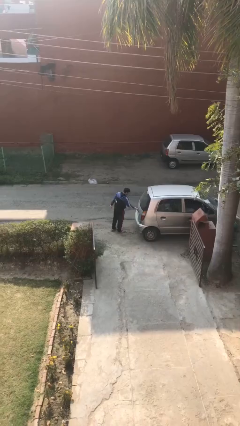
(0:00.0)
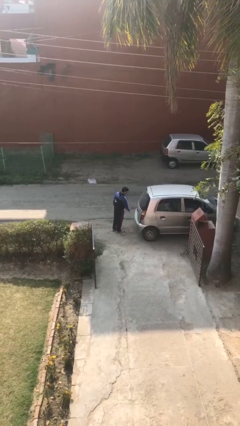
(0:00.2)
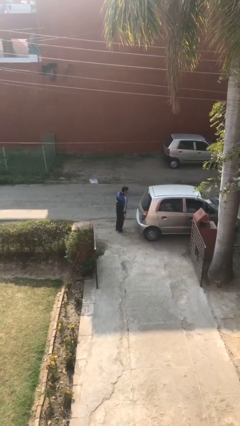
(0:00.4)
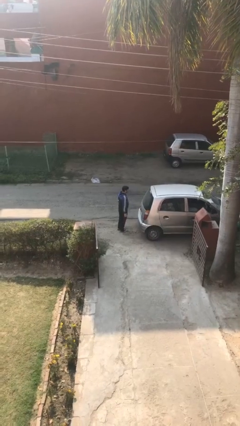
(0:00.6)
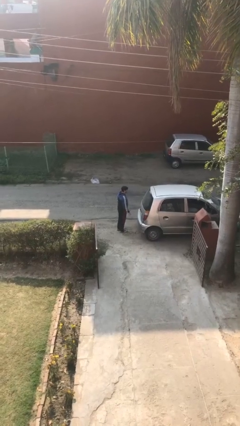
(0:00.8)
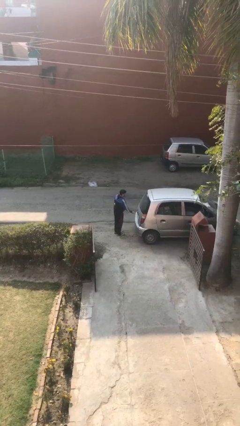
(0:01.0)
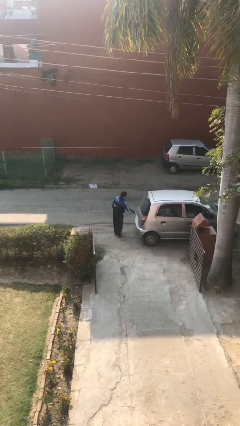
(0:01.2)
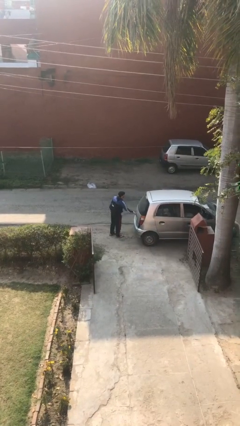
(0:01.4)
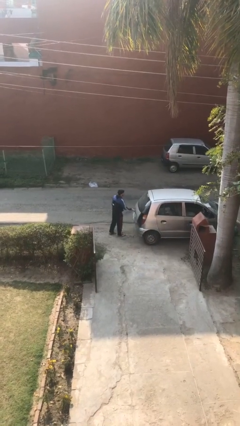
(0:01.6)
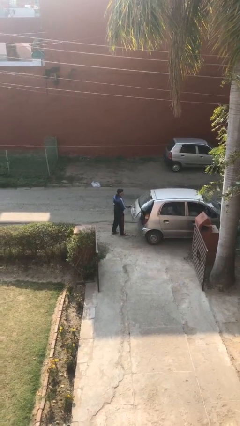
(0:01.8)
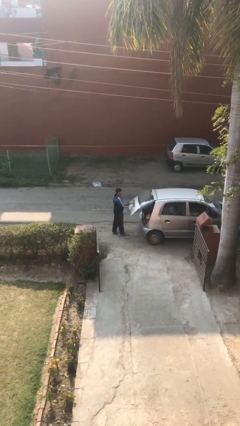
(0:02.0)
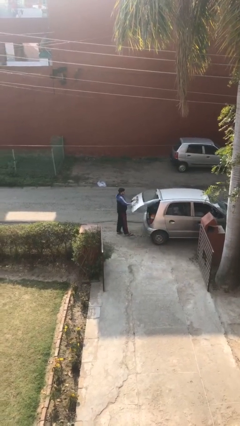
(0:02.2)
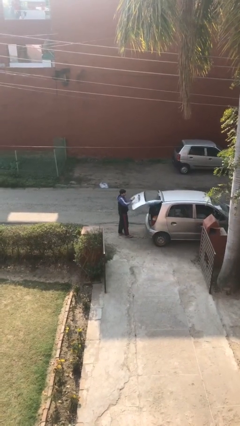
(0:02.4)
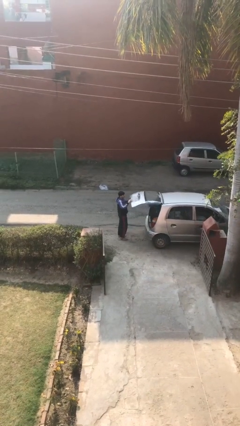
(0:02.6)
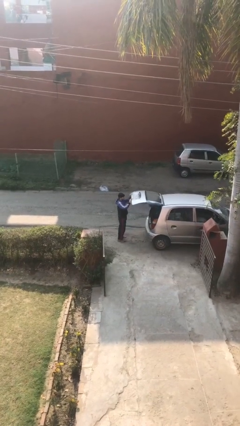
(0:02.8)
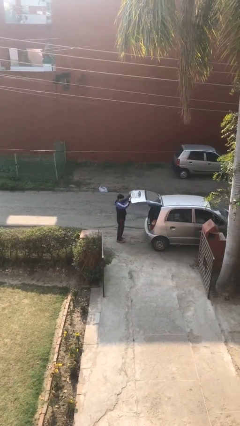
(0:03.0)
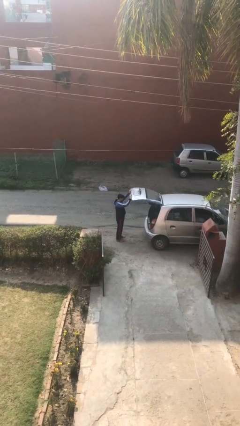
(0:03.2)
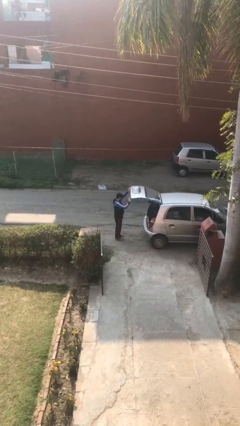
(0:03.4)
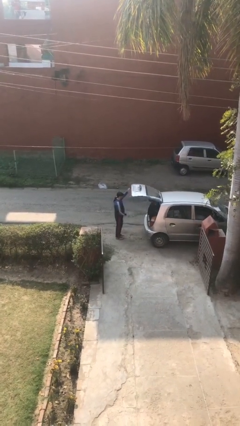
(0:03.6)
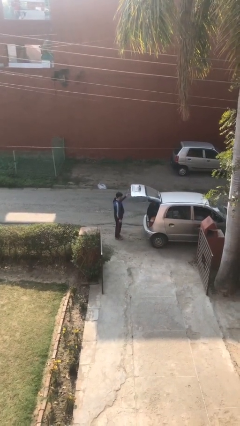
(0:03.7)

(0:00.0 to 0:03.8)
person opens car trunk

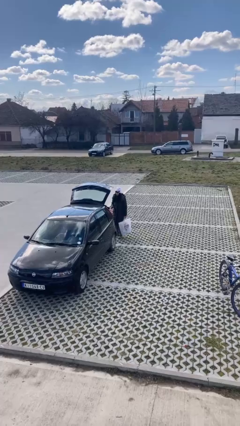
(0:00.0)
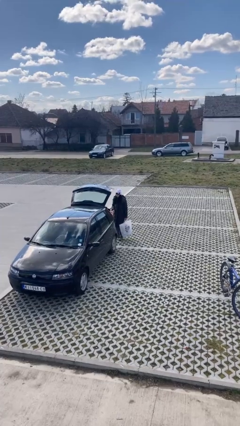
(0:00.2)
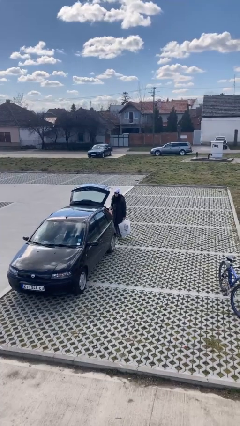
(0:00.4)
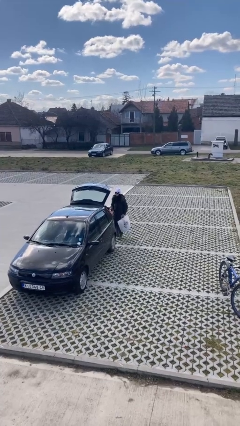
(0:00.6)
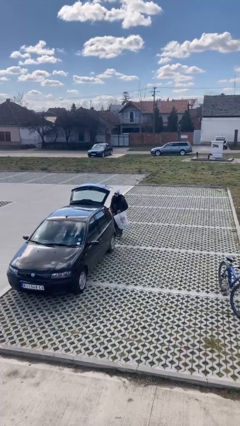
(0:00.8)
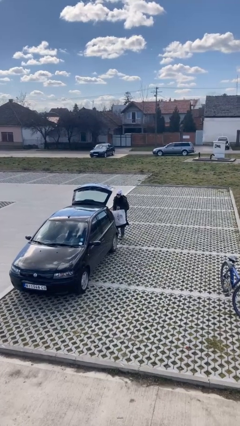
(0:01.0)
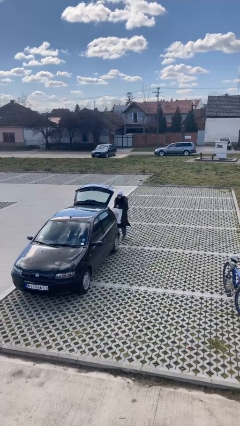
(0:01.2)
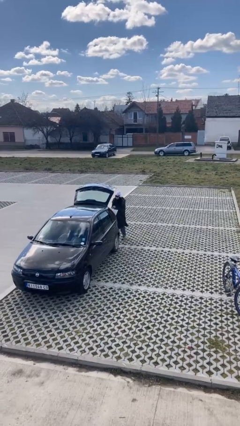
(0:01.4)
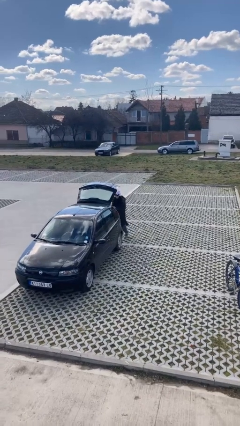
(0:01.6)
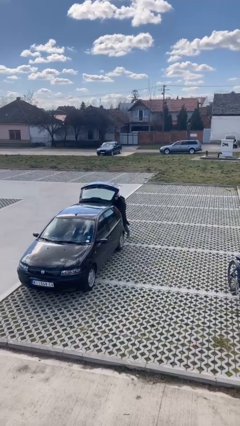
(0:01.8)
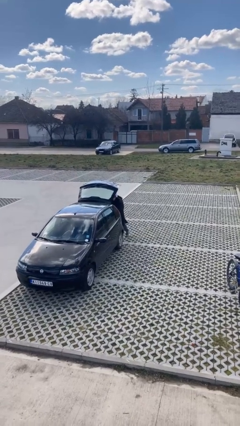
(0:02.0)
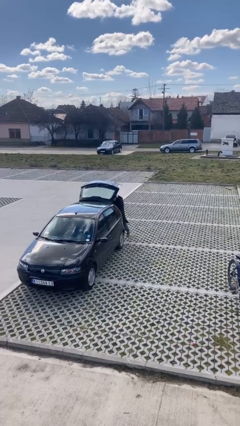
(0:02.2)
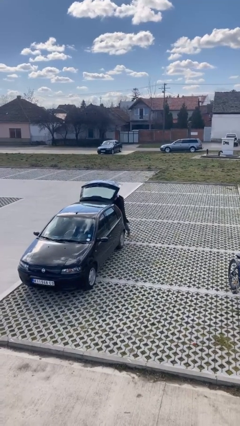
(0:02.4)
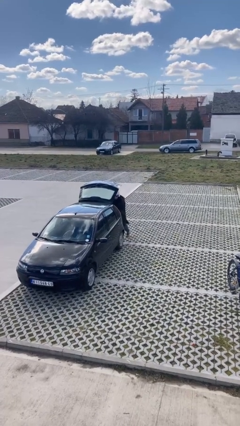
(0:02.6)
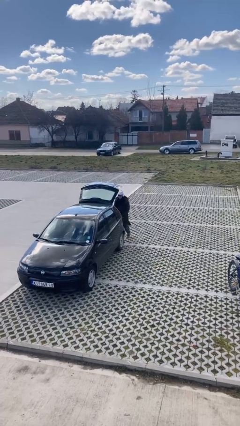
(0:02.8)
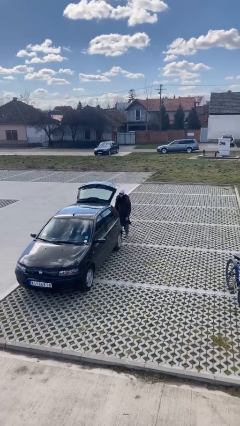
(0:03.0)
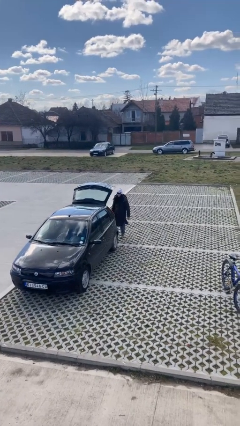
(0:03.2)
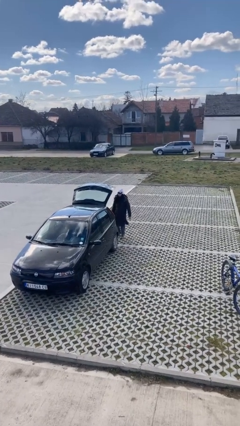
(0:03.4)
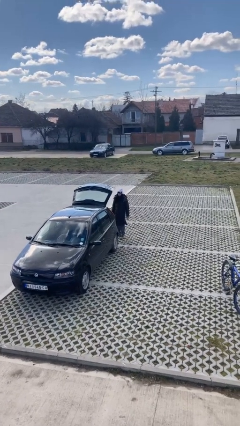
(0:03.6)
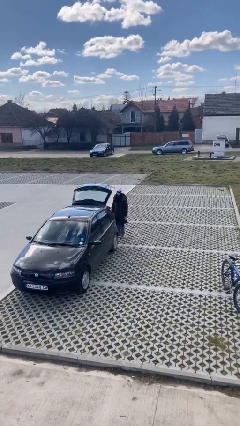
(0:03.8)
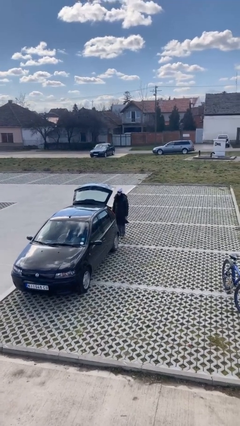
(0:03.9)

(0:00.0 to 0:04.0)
person loads car

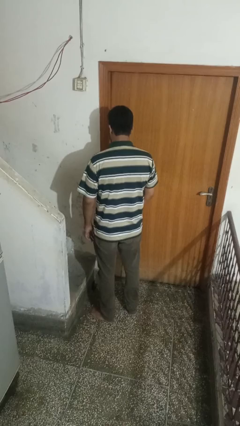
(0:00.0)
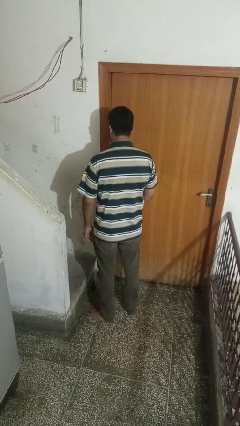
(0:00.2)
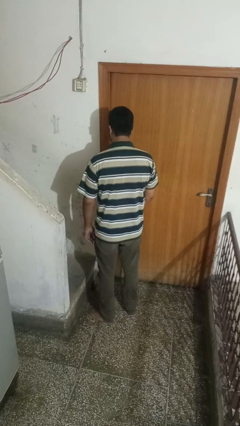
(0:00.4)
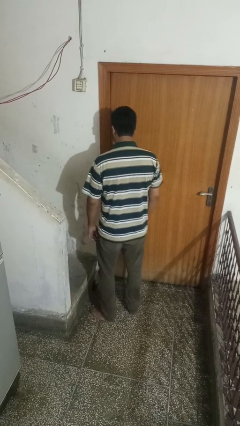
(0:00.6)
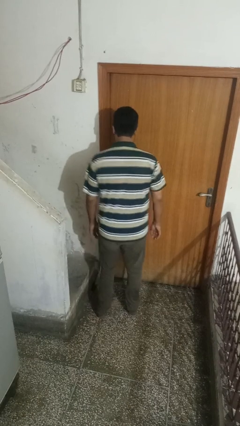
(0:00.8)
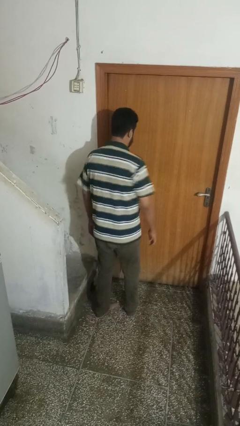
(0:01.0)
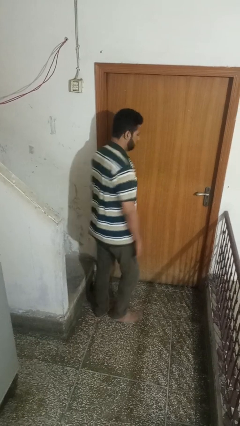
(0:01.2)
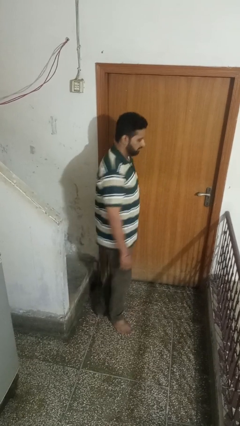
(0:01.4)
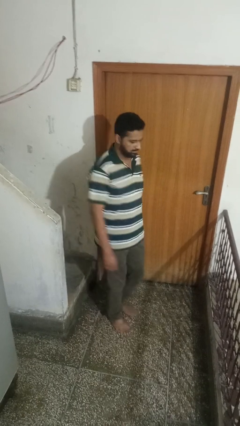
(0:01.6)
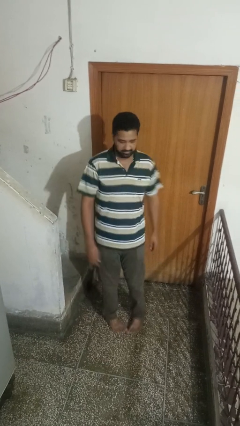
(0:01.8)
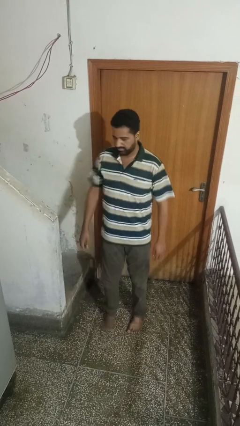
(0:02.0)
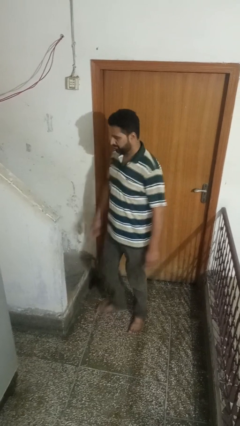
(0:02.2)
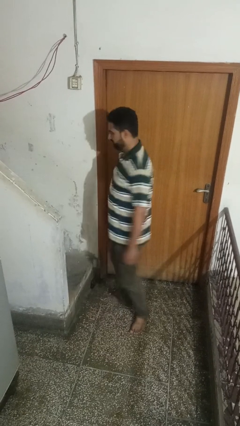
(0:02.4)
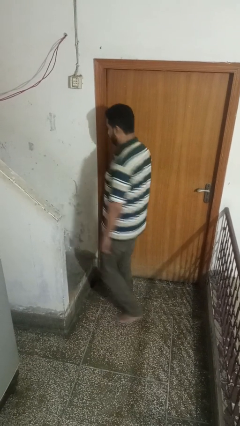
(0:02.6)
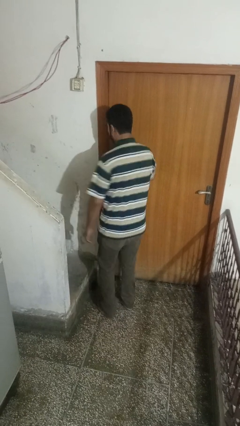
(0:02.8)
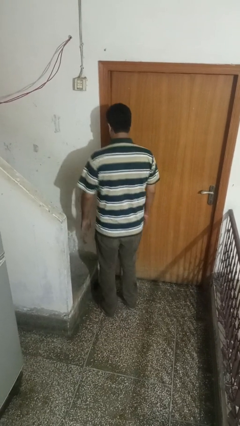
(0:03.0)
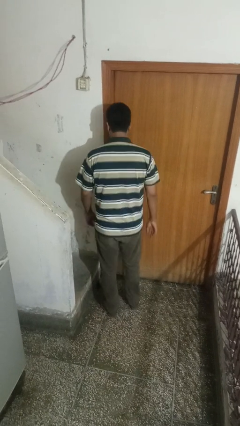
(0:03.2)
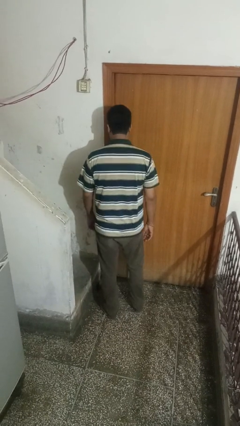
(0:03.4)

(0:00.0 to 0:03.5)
person twirls

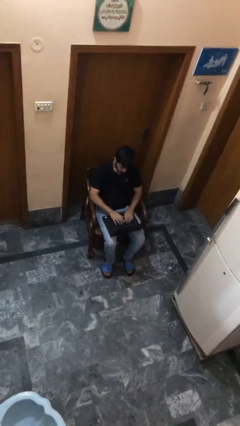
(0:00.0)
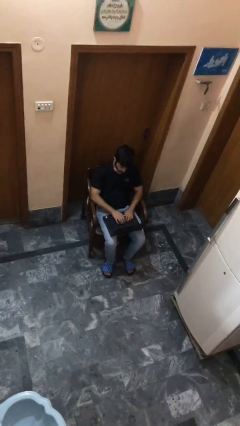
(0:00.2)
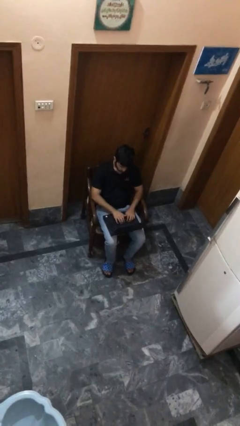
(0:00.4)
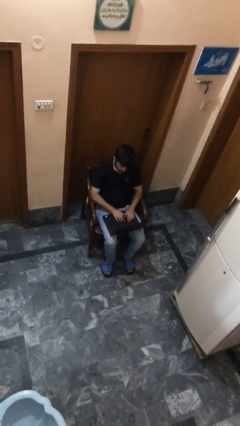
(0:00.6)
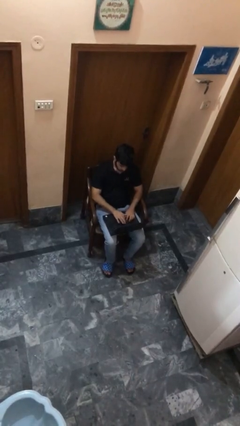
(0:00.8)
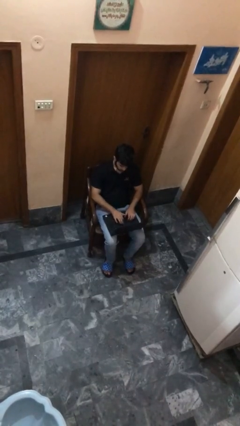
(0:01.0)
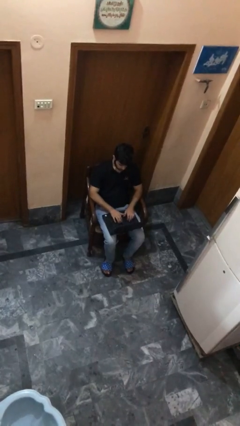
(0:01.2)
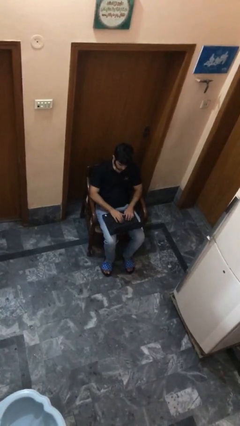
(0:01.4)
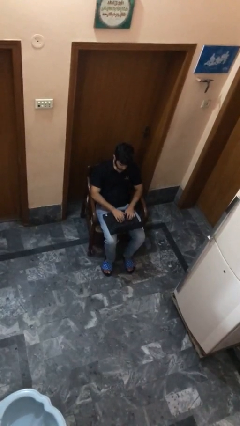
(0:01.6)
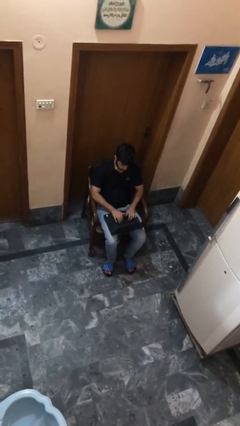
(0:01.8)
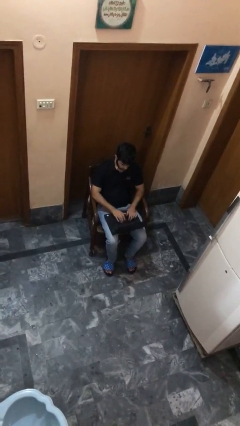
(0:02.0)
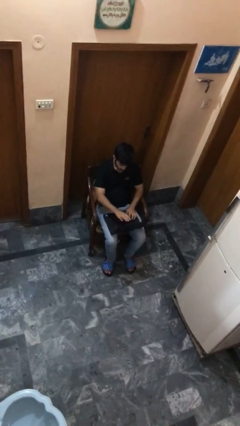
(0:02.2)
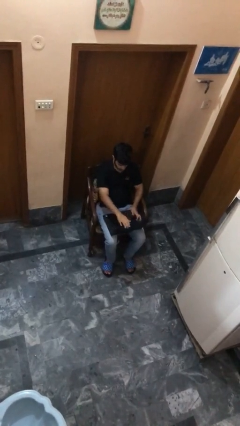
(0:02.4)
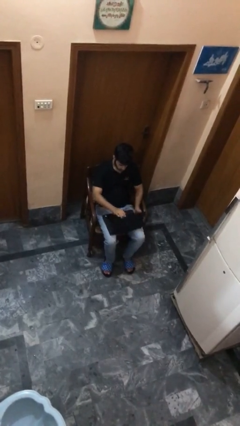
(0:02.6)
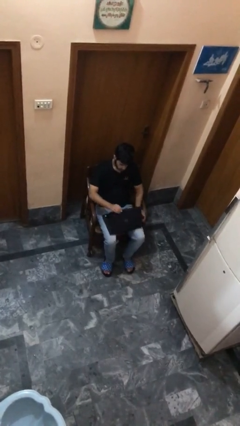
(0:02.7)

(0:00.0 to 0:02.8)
person interacts with laptop

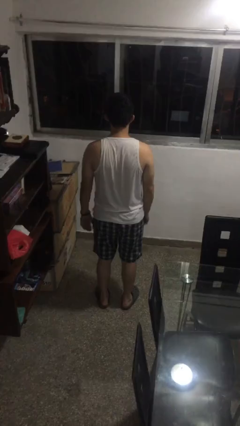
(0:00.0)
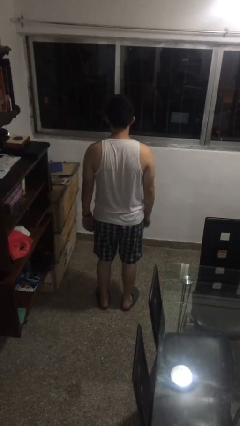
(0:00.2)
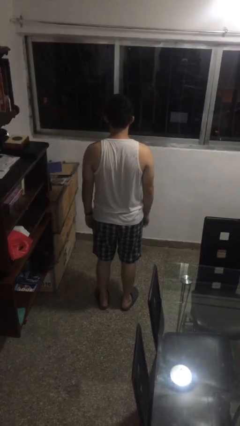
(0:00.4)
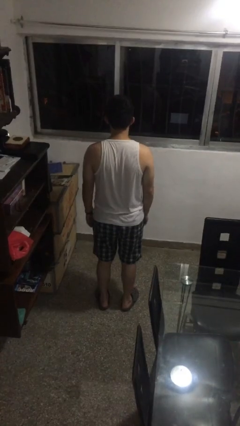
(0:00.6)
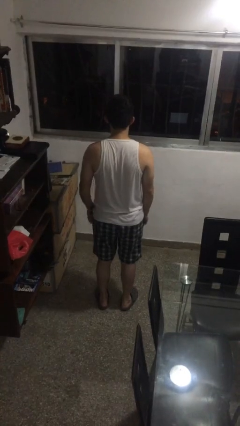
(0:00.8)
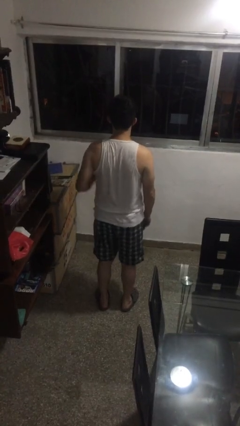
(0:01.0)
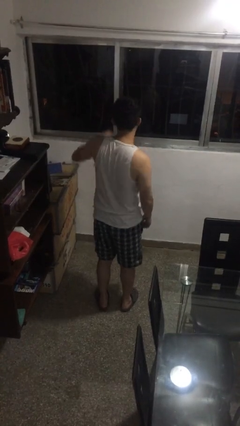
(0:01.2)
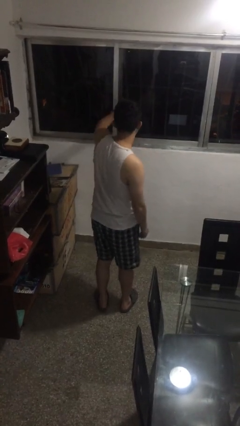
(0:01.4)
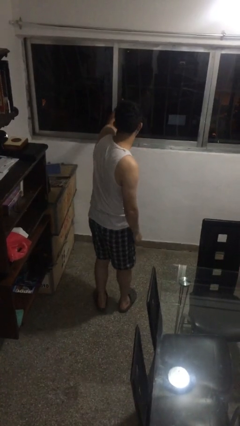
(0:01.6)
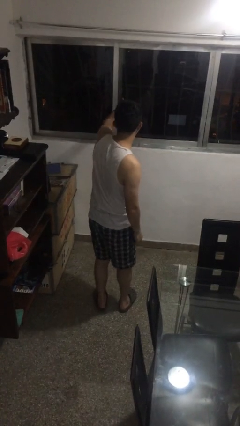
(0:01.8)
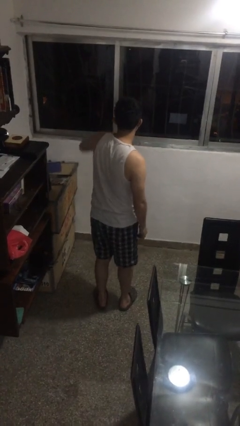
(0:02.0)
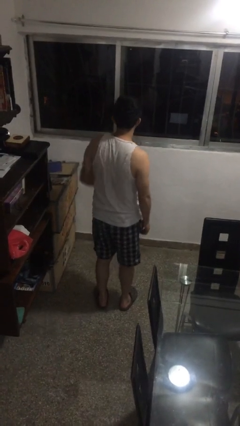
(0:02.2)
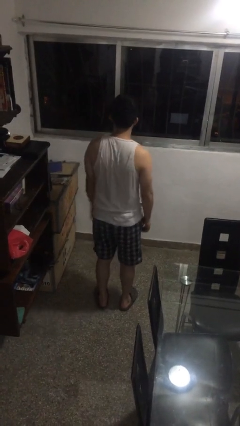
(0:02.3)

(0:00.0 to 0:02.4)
person punches

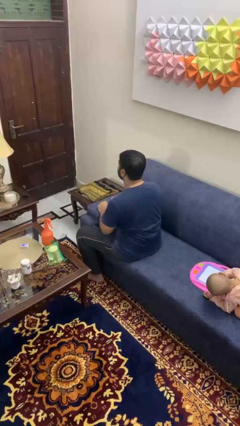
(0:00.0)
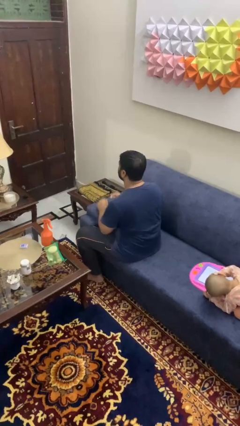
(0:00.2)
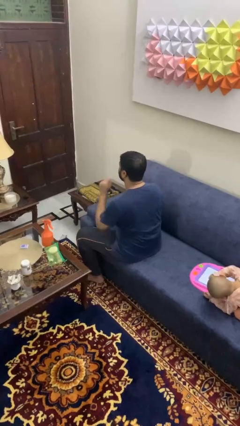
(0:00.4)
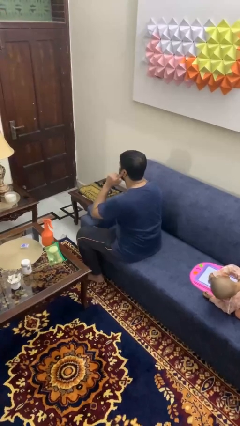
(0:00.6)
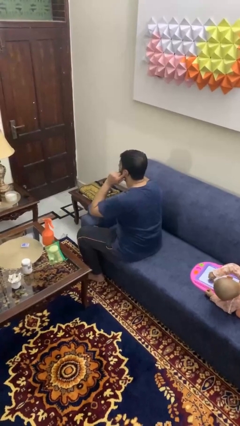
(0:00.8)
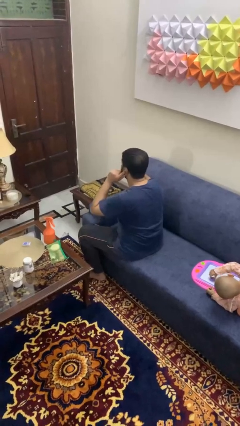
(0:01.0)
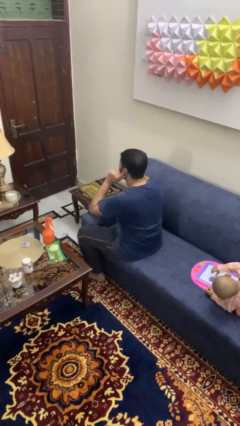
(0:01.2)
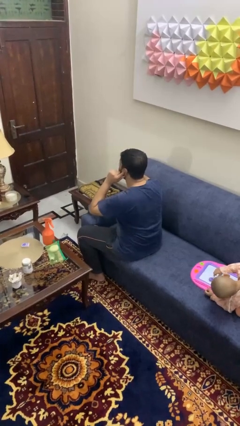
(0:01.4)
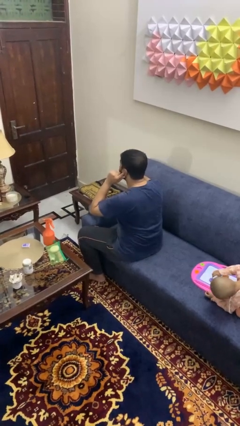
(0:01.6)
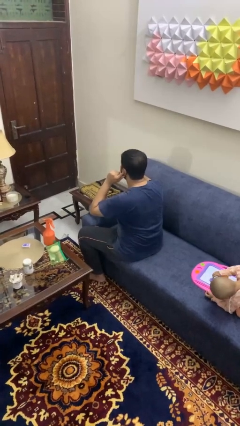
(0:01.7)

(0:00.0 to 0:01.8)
person puts fingers in ear
